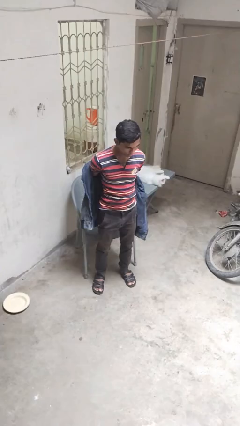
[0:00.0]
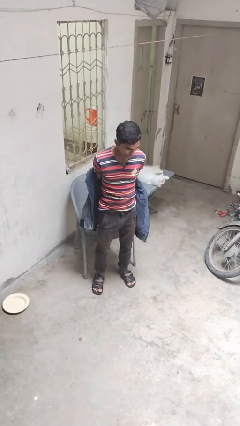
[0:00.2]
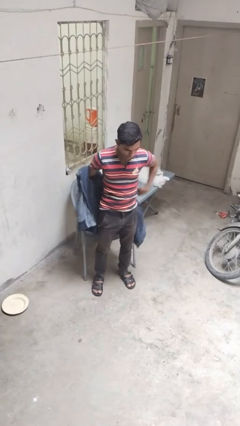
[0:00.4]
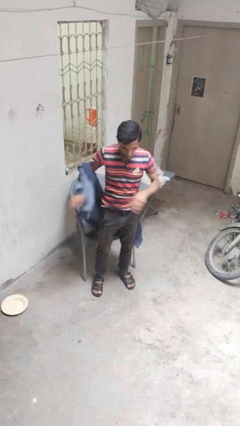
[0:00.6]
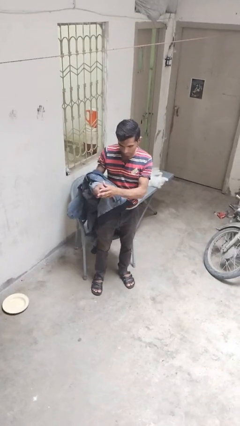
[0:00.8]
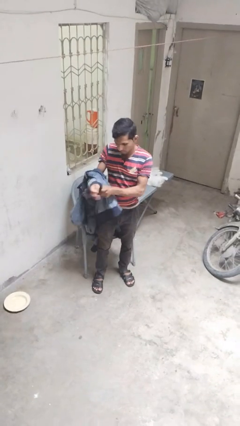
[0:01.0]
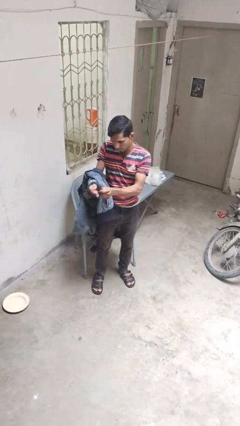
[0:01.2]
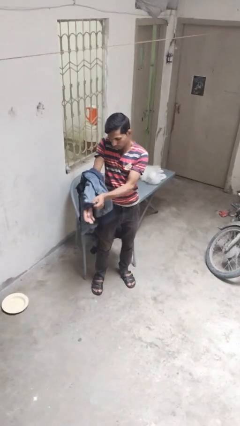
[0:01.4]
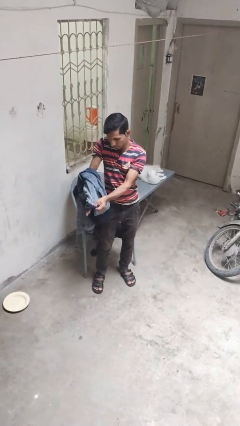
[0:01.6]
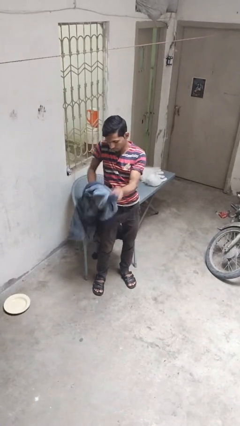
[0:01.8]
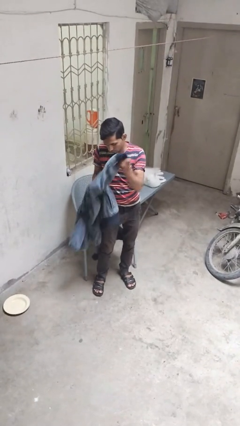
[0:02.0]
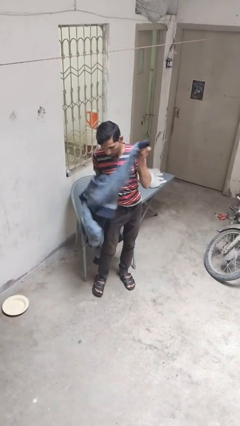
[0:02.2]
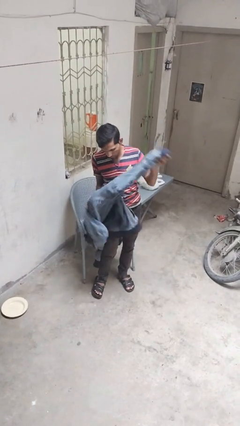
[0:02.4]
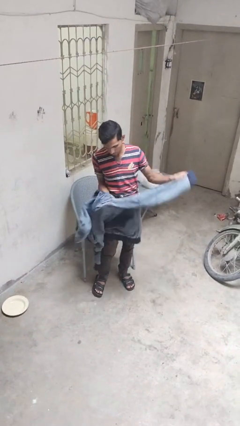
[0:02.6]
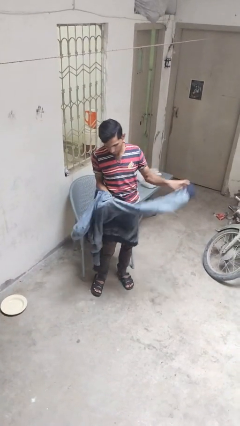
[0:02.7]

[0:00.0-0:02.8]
person takes off jacket

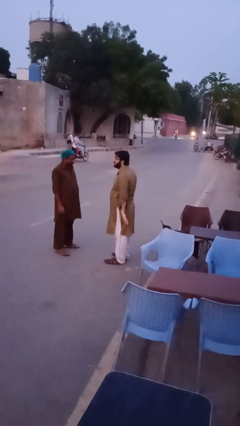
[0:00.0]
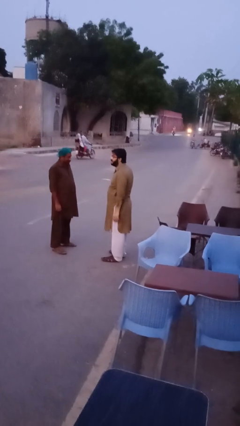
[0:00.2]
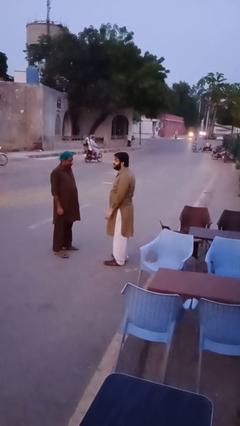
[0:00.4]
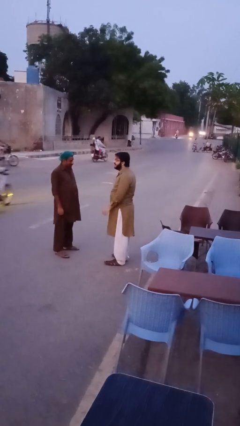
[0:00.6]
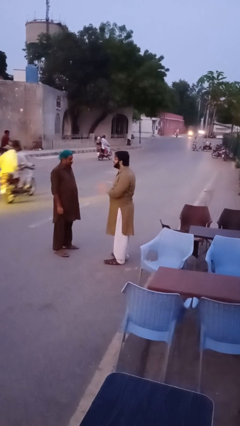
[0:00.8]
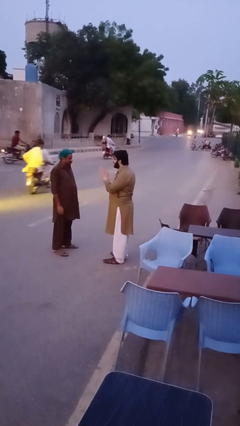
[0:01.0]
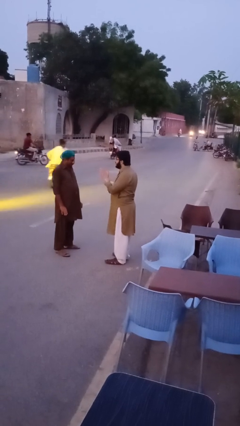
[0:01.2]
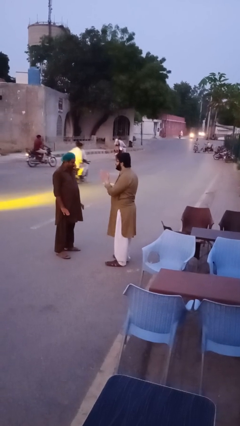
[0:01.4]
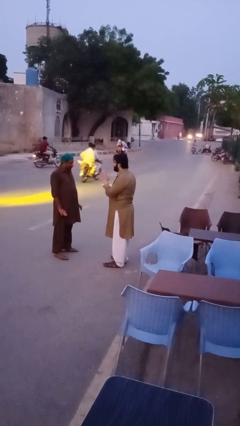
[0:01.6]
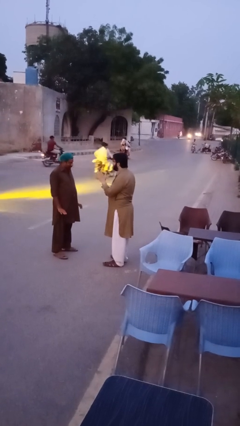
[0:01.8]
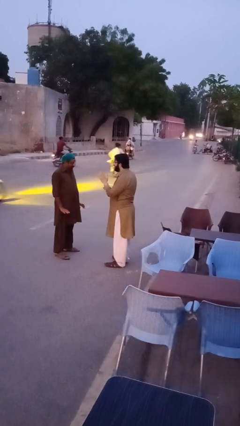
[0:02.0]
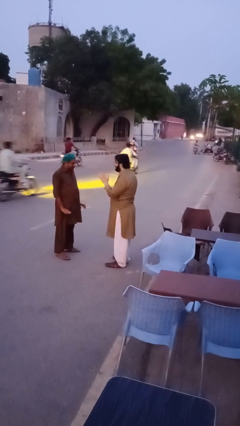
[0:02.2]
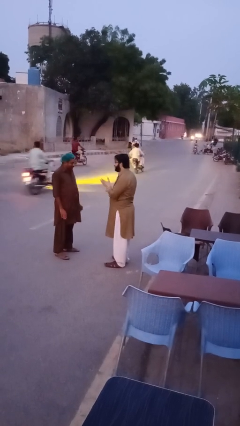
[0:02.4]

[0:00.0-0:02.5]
person talks to person

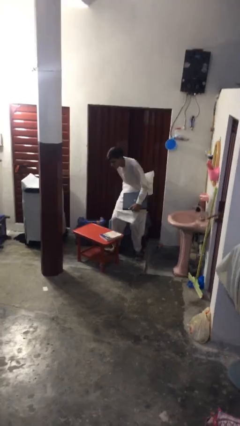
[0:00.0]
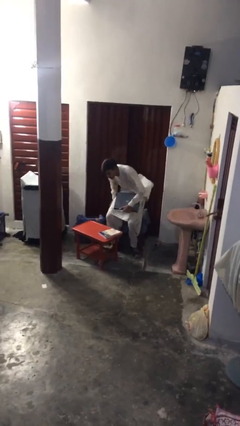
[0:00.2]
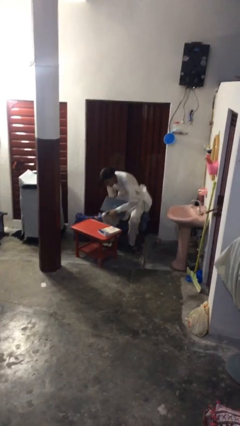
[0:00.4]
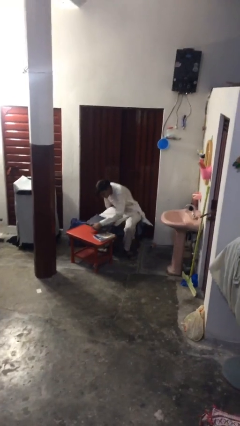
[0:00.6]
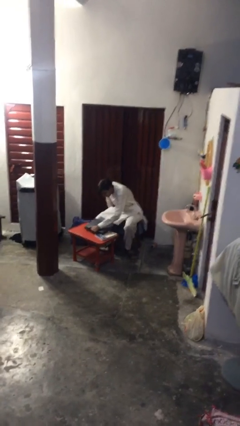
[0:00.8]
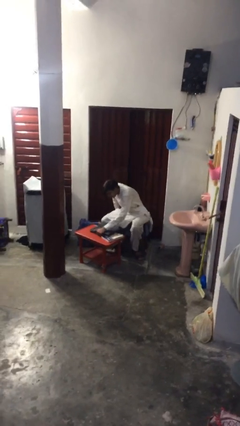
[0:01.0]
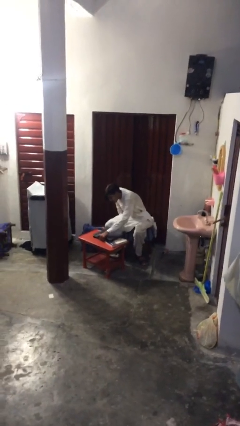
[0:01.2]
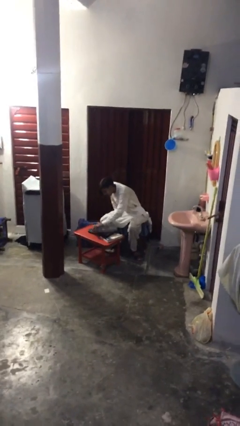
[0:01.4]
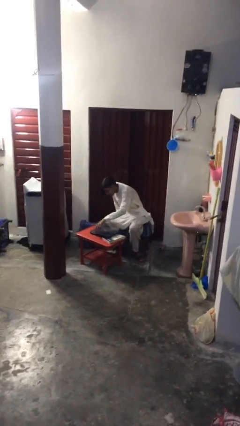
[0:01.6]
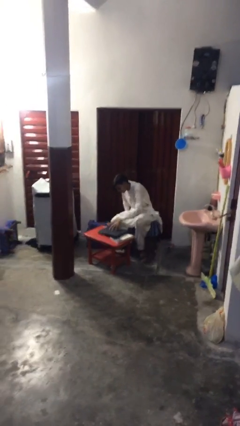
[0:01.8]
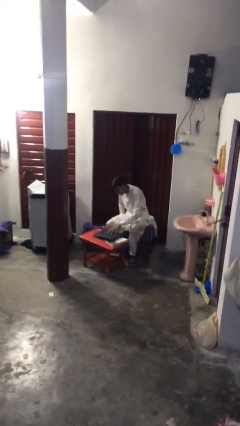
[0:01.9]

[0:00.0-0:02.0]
person sits down

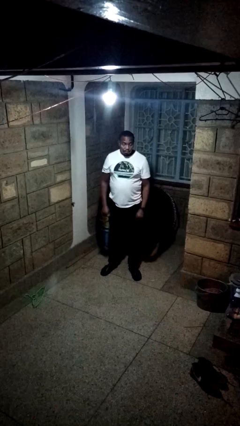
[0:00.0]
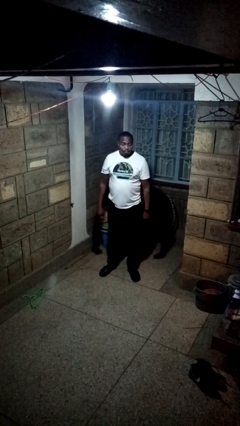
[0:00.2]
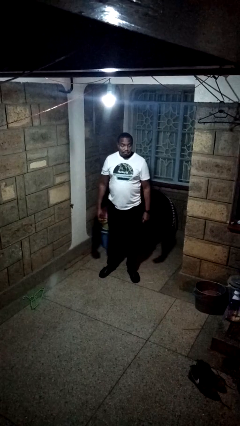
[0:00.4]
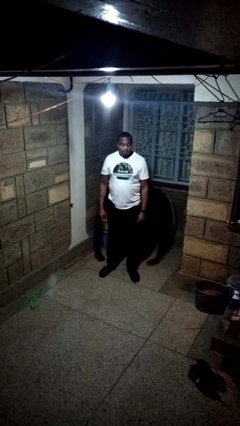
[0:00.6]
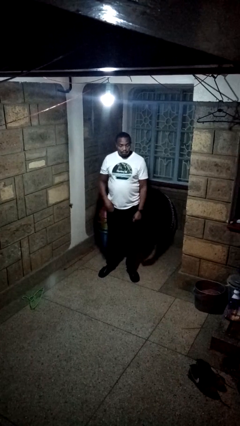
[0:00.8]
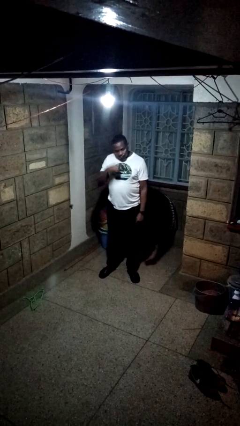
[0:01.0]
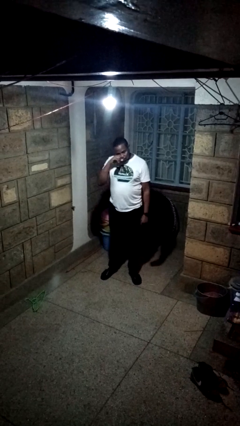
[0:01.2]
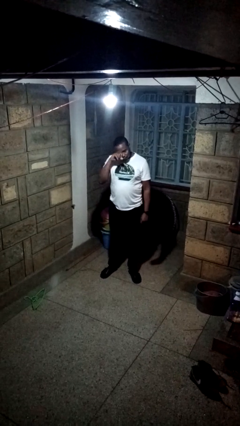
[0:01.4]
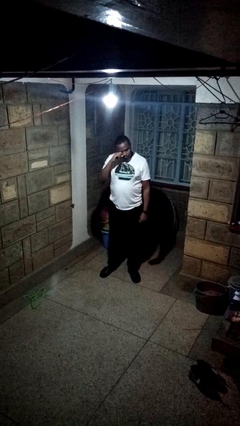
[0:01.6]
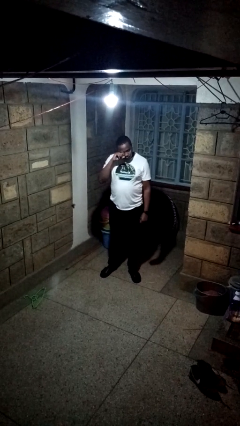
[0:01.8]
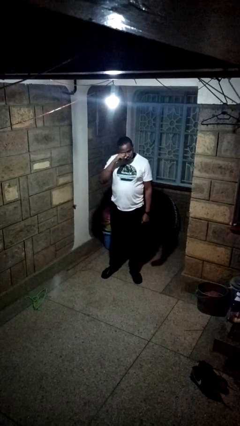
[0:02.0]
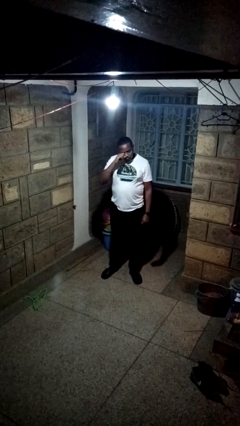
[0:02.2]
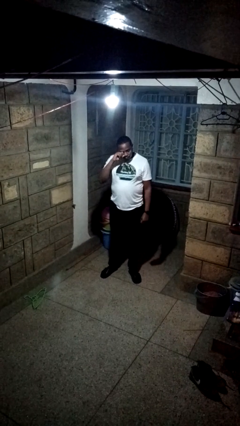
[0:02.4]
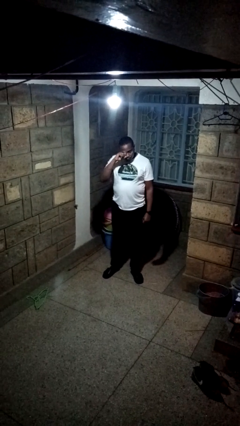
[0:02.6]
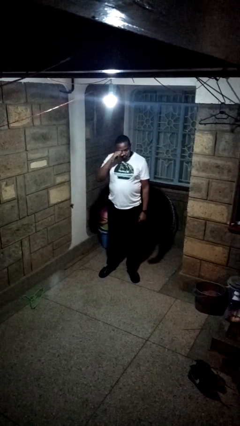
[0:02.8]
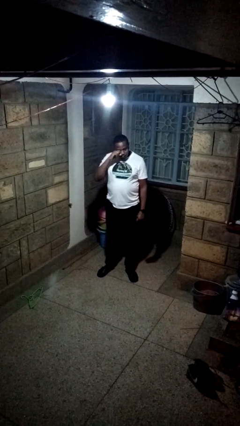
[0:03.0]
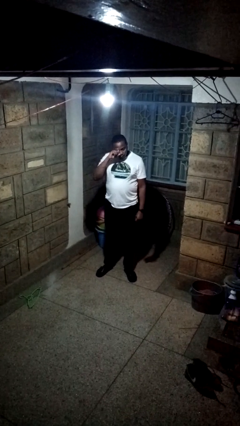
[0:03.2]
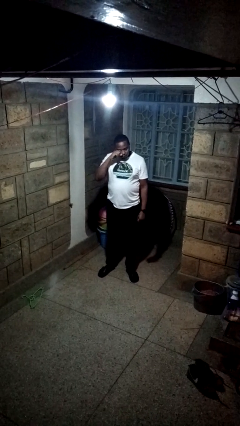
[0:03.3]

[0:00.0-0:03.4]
person rubs eyes

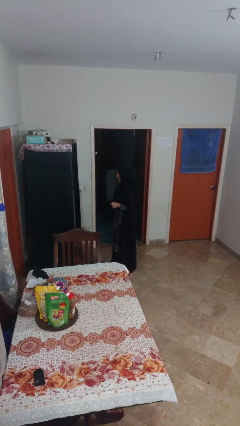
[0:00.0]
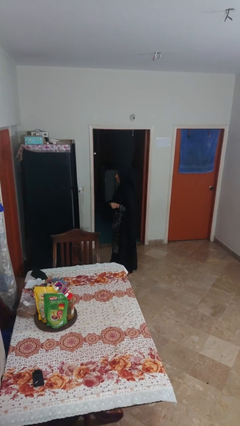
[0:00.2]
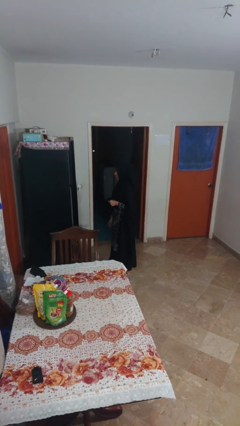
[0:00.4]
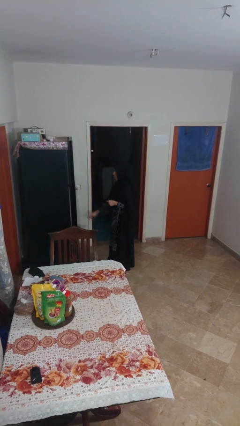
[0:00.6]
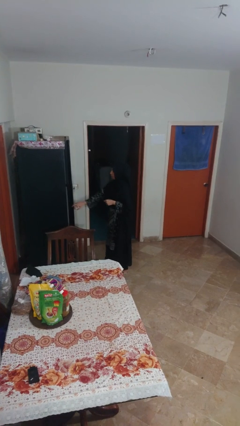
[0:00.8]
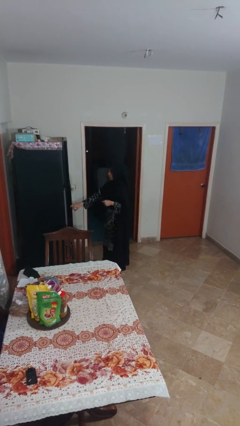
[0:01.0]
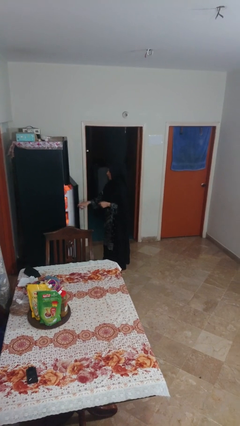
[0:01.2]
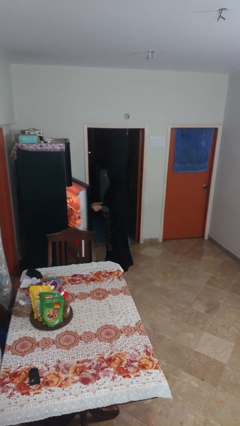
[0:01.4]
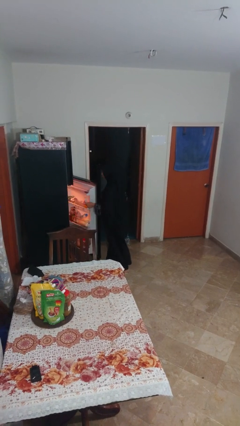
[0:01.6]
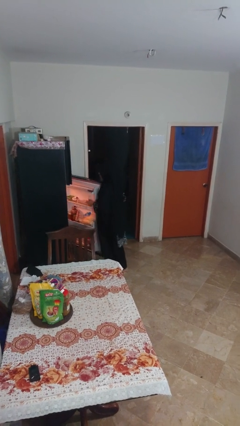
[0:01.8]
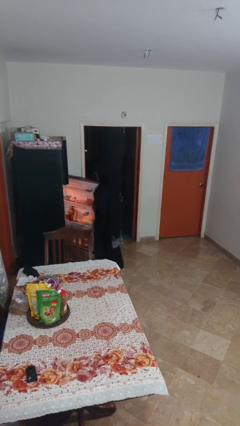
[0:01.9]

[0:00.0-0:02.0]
person opens refrigerator

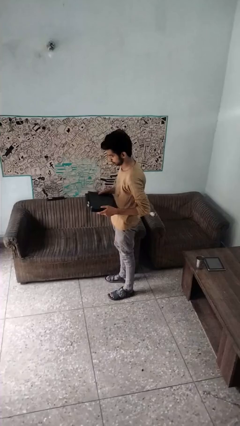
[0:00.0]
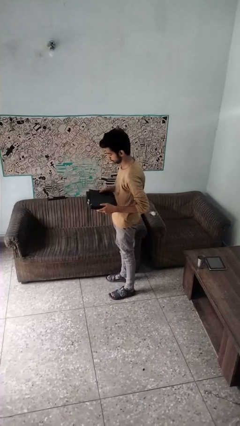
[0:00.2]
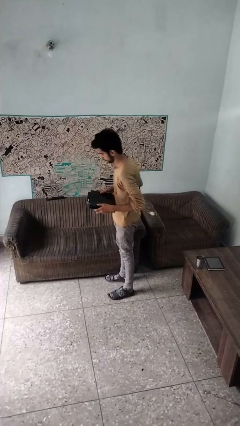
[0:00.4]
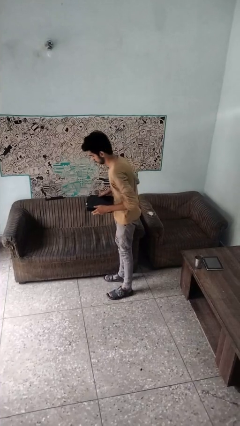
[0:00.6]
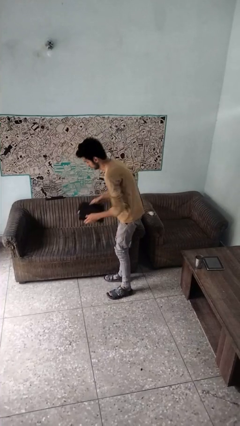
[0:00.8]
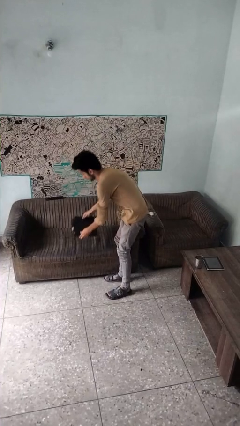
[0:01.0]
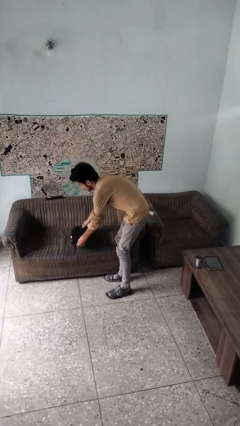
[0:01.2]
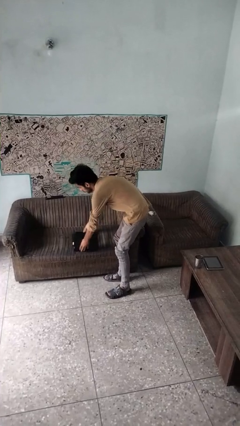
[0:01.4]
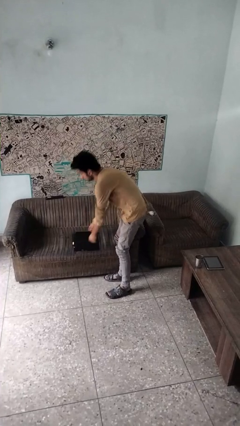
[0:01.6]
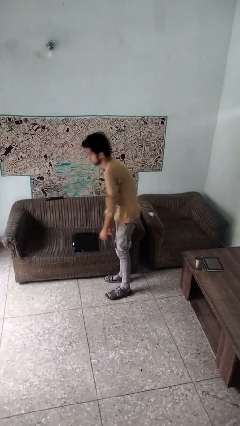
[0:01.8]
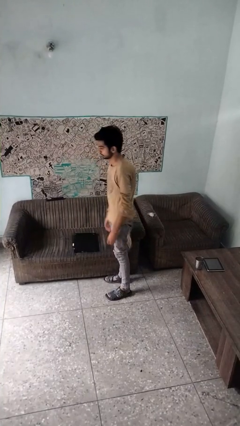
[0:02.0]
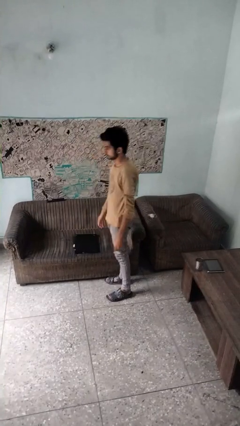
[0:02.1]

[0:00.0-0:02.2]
person puts down object on couch

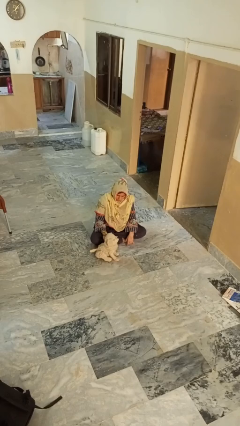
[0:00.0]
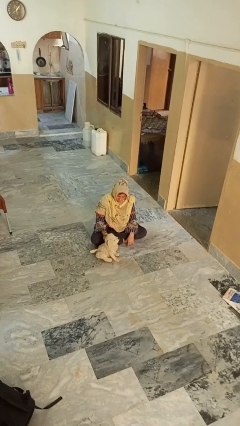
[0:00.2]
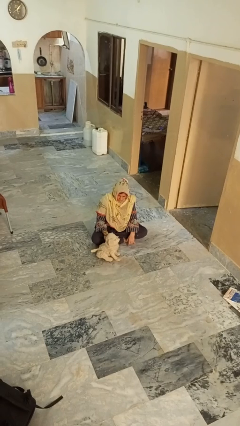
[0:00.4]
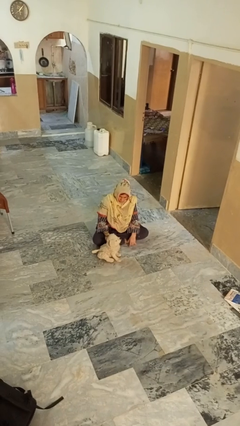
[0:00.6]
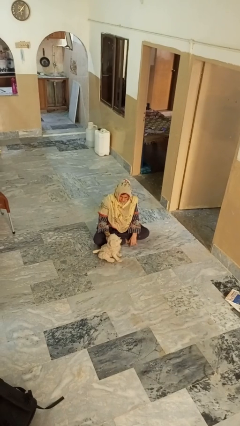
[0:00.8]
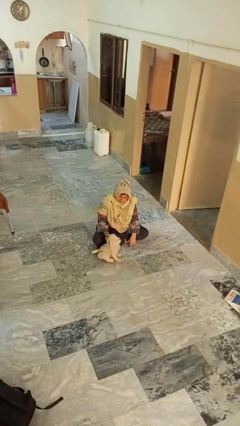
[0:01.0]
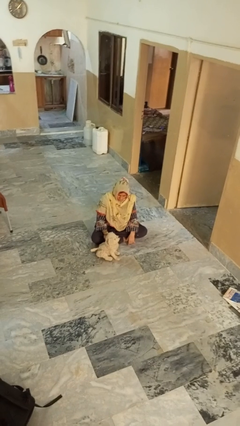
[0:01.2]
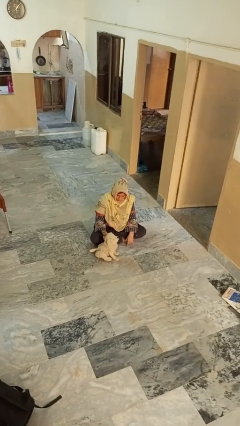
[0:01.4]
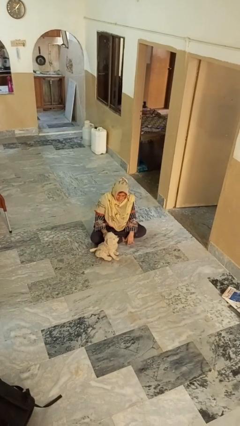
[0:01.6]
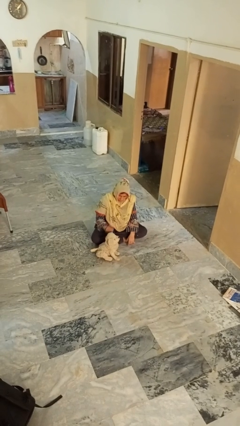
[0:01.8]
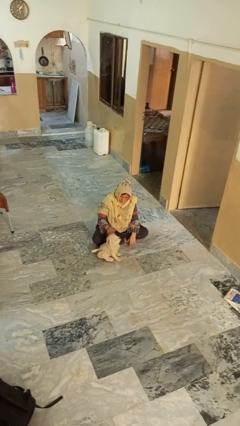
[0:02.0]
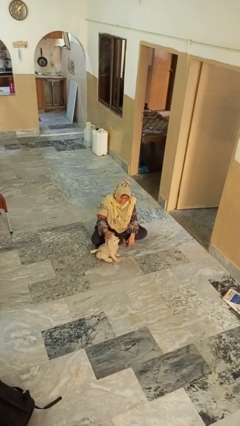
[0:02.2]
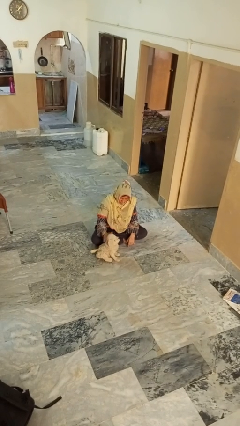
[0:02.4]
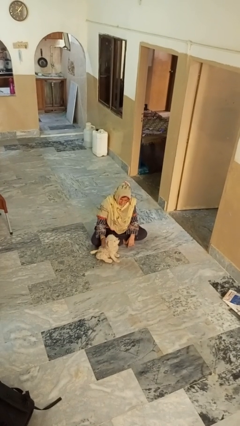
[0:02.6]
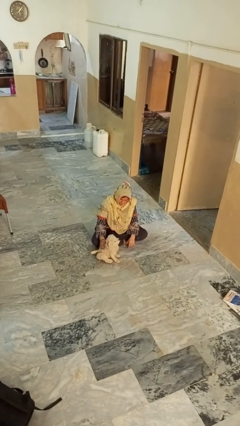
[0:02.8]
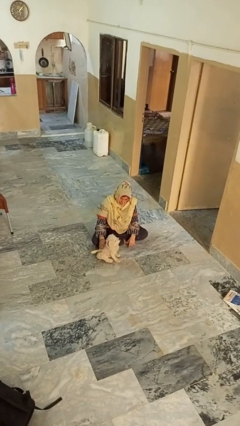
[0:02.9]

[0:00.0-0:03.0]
person pets dog
